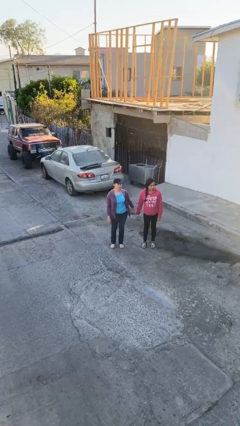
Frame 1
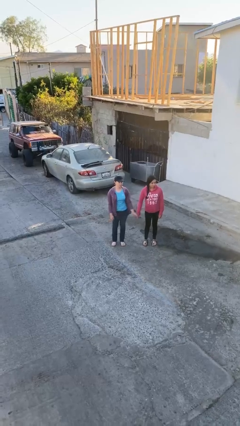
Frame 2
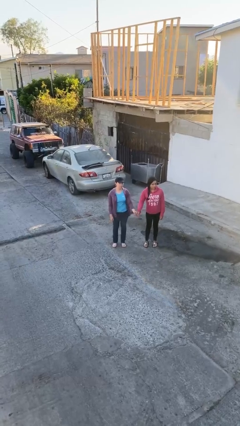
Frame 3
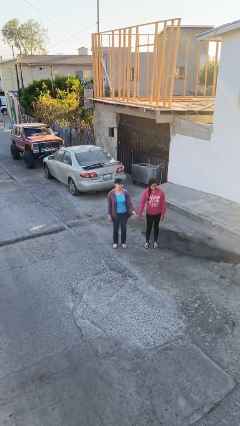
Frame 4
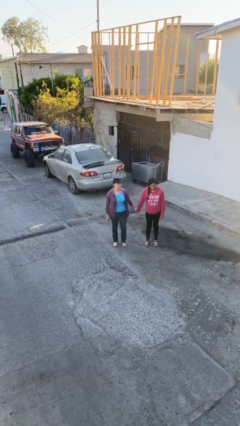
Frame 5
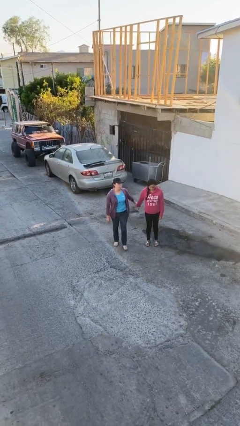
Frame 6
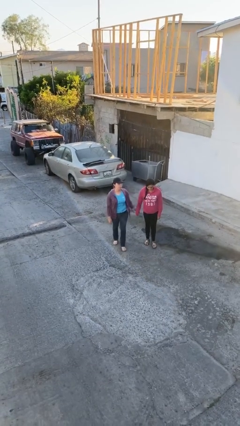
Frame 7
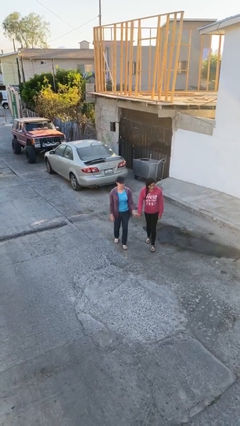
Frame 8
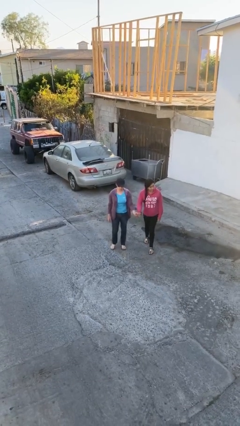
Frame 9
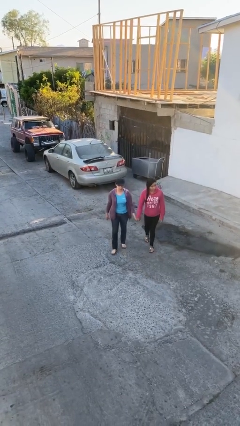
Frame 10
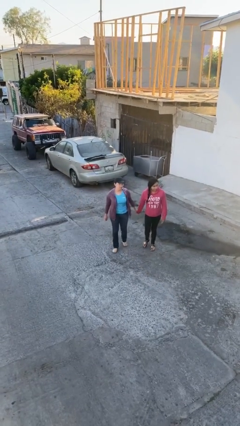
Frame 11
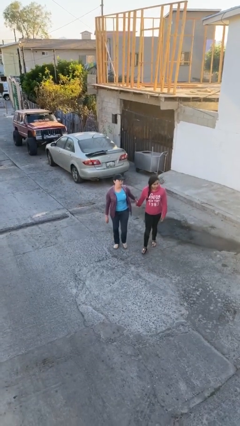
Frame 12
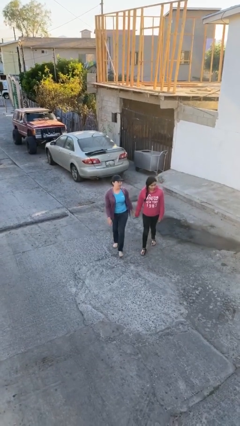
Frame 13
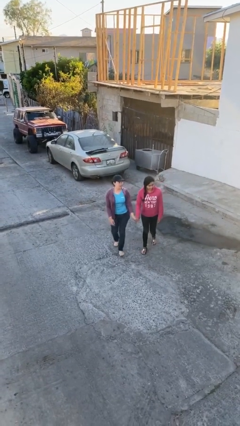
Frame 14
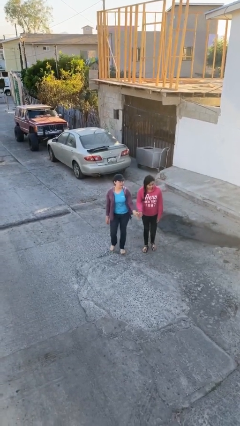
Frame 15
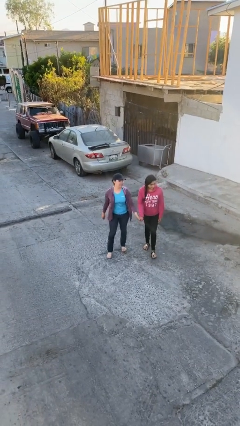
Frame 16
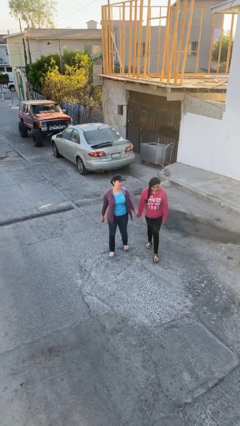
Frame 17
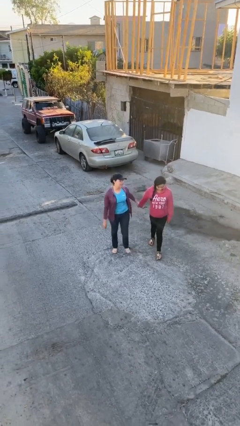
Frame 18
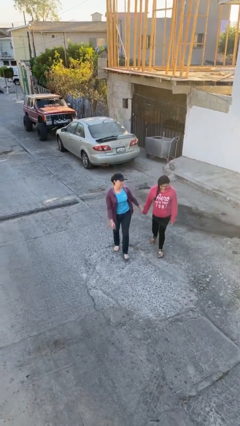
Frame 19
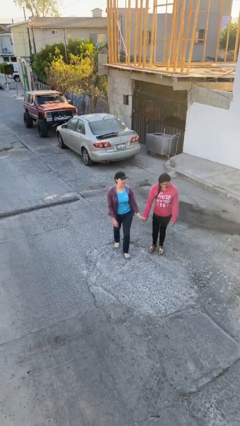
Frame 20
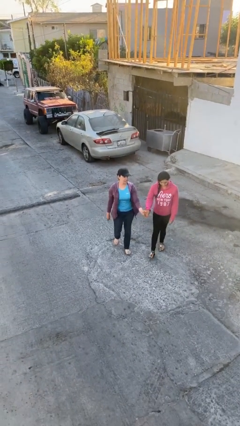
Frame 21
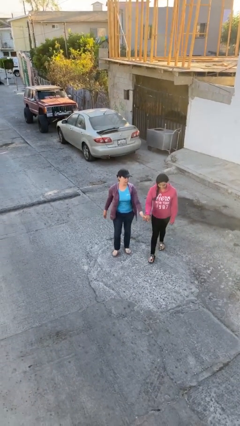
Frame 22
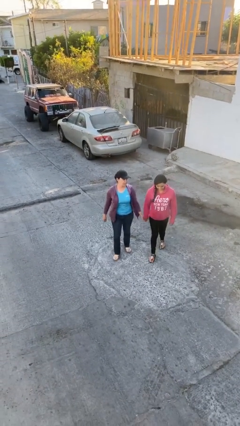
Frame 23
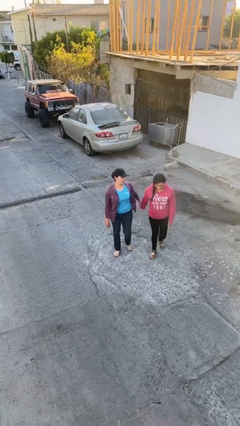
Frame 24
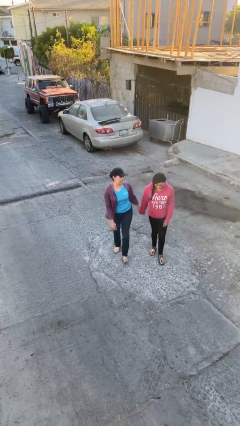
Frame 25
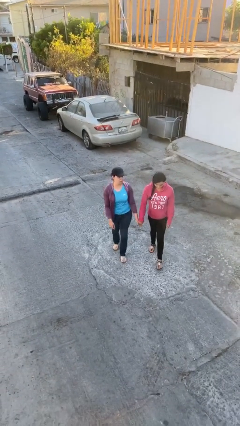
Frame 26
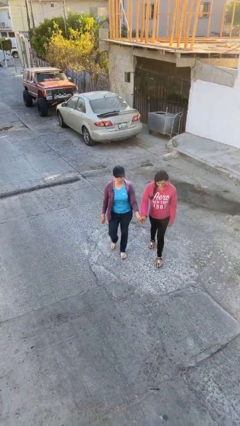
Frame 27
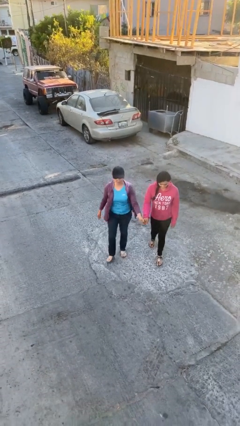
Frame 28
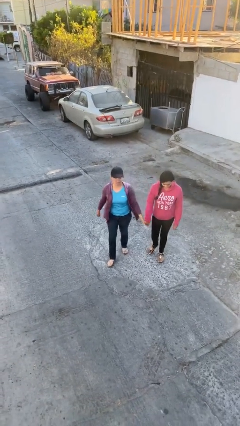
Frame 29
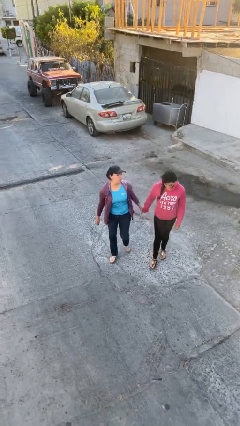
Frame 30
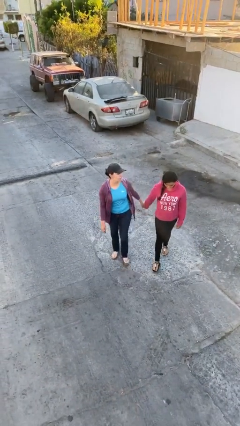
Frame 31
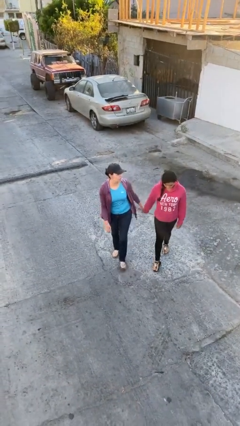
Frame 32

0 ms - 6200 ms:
person holds hand

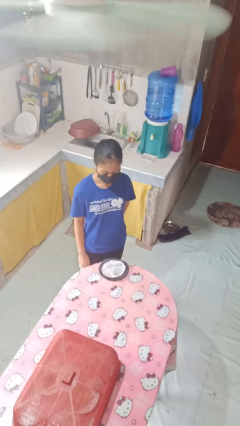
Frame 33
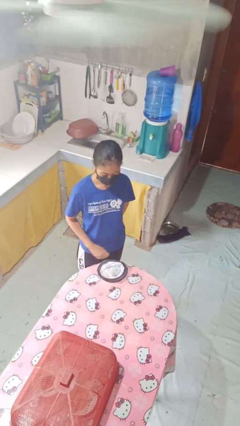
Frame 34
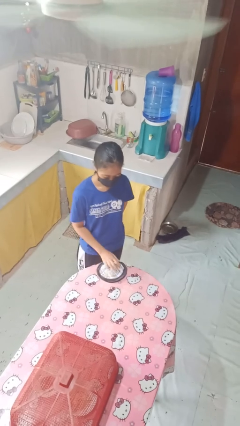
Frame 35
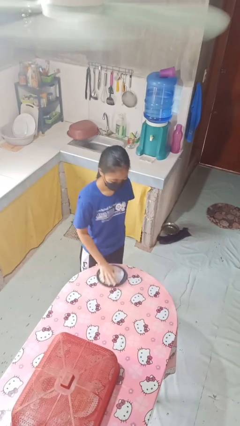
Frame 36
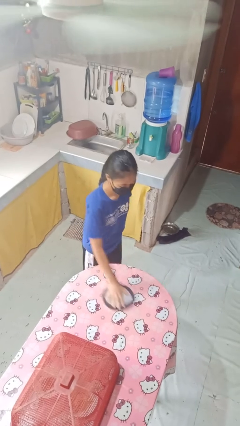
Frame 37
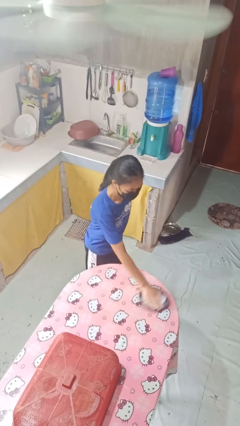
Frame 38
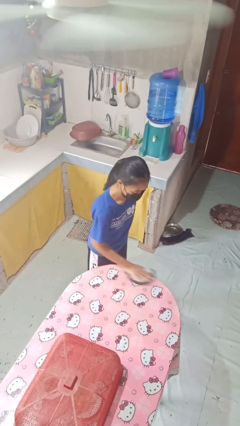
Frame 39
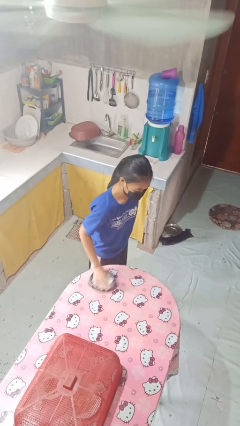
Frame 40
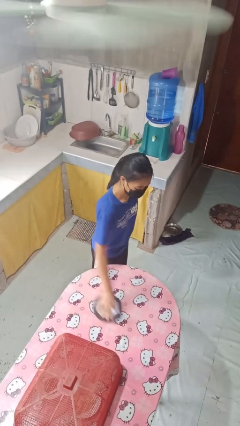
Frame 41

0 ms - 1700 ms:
person cleans table with rag

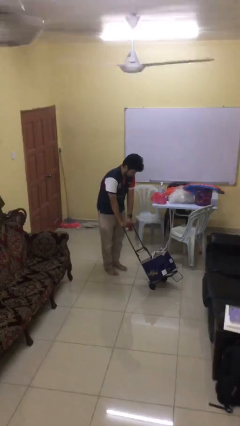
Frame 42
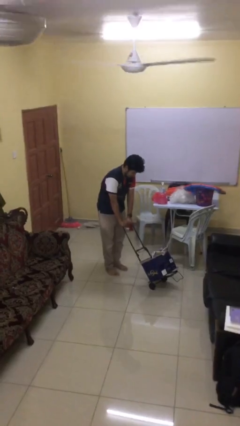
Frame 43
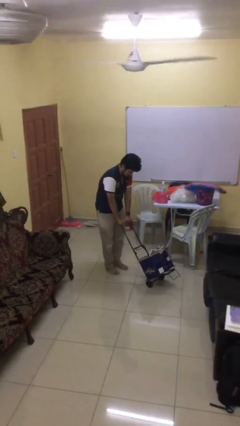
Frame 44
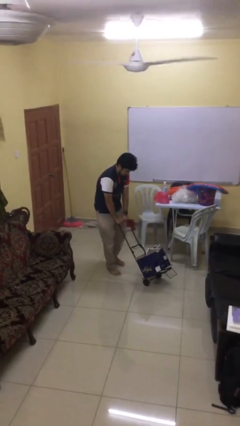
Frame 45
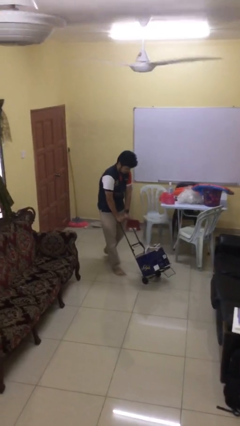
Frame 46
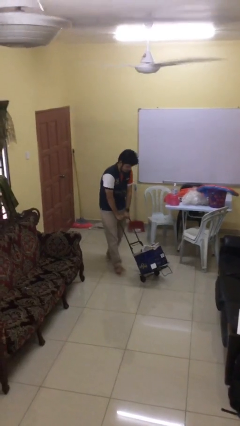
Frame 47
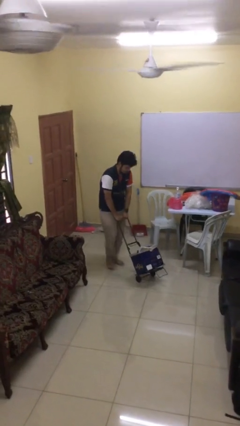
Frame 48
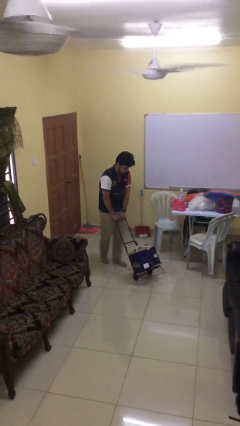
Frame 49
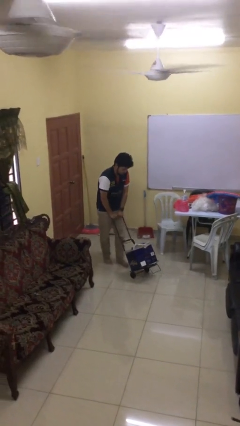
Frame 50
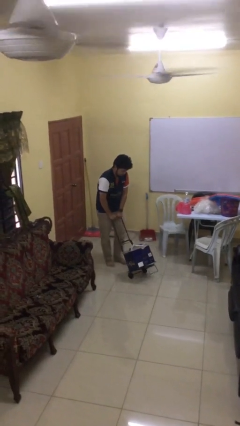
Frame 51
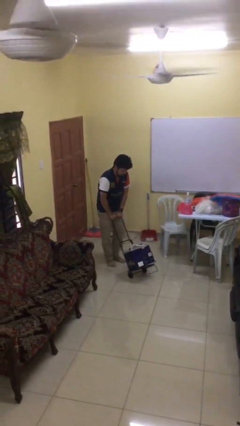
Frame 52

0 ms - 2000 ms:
person pulls wheeled cart

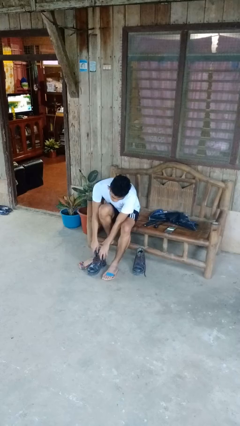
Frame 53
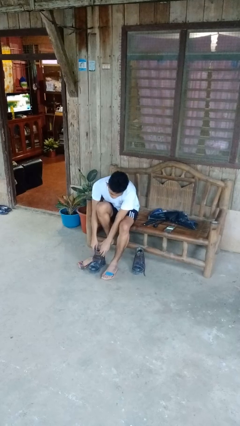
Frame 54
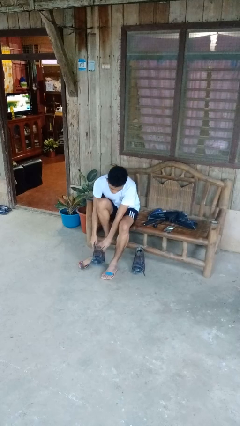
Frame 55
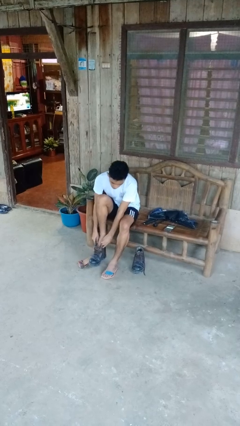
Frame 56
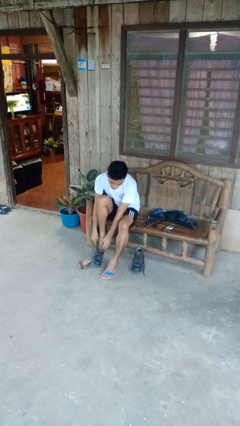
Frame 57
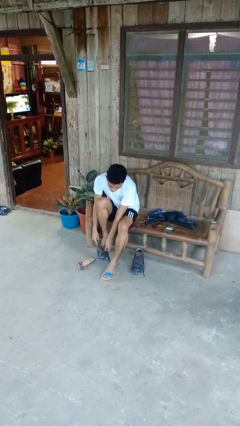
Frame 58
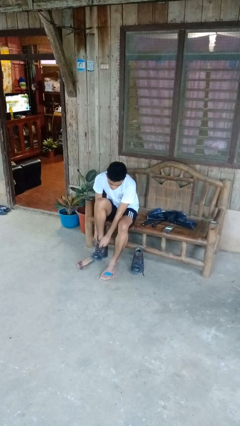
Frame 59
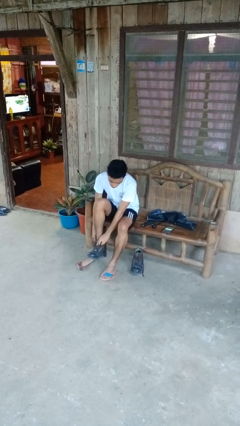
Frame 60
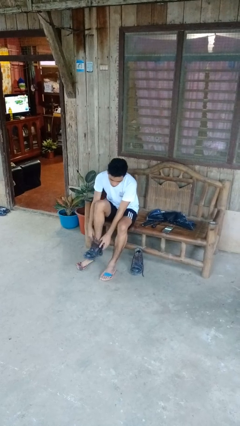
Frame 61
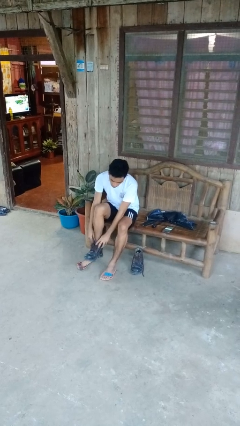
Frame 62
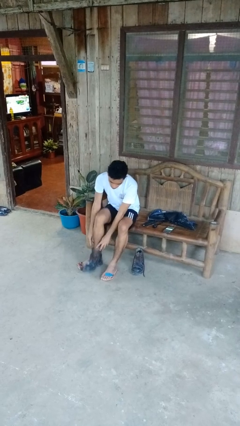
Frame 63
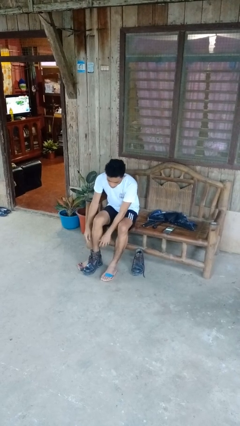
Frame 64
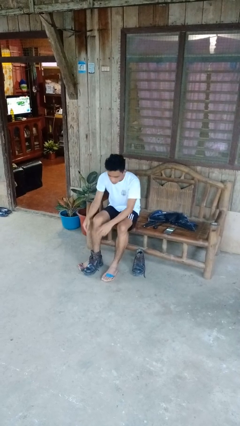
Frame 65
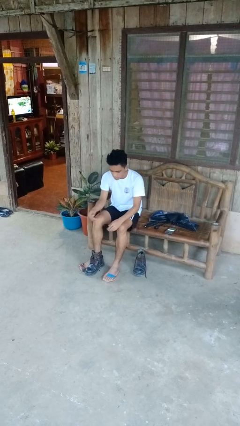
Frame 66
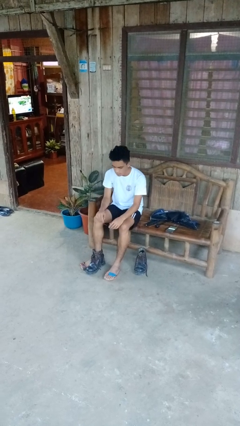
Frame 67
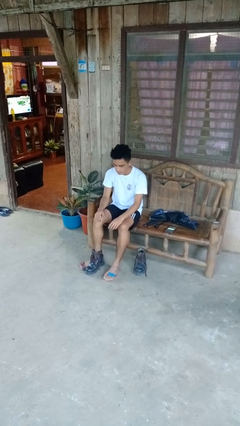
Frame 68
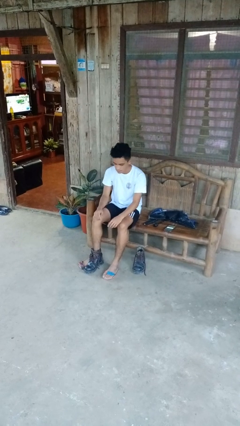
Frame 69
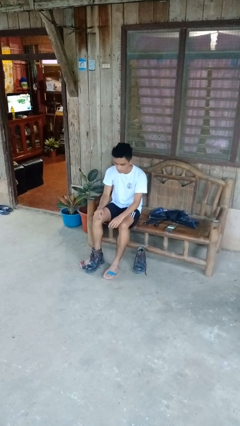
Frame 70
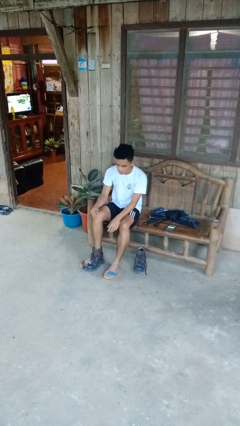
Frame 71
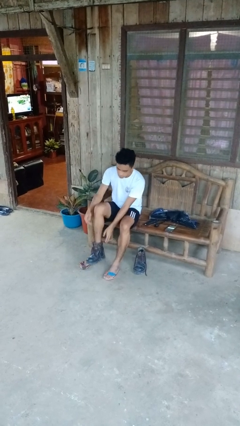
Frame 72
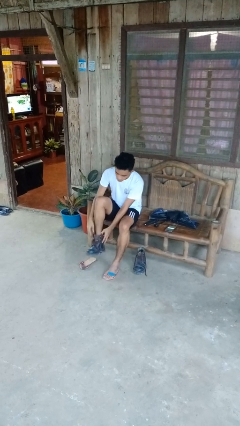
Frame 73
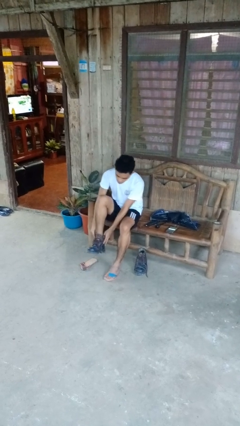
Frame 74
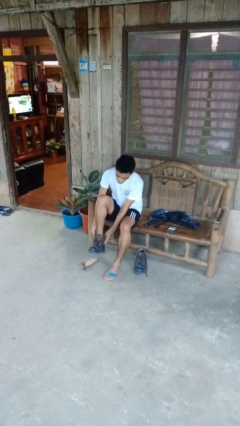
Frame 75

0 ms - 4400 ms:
person puts on boots

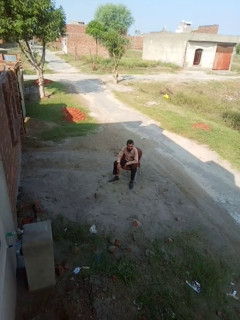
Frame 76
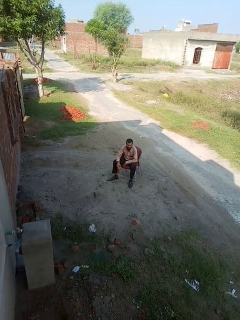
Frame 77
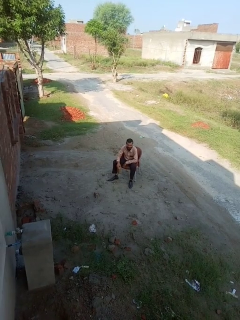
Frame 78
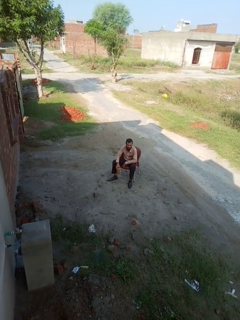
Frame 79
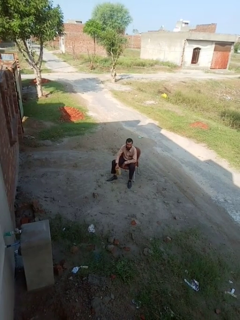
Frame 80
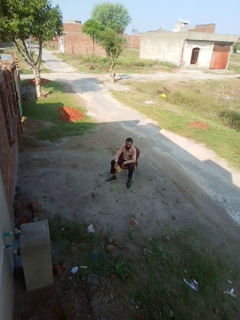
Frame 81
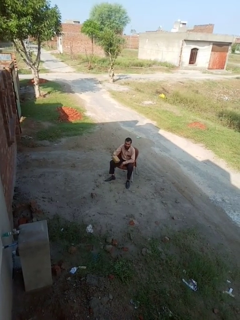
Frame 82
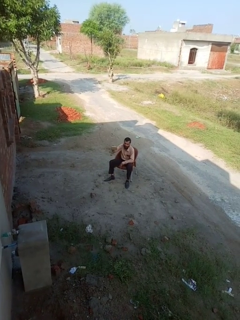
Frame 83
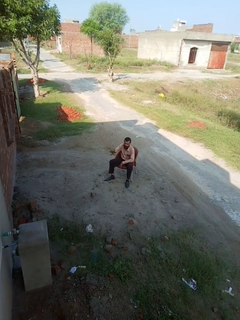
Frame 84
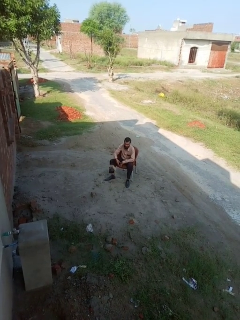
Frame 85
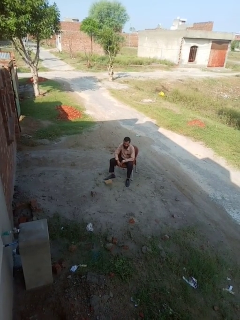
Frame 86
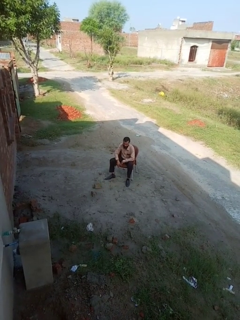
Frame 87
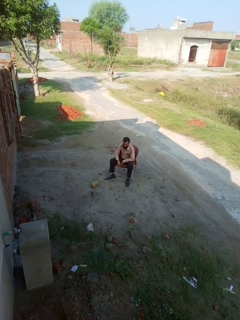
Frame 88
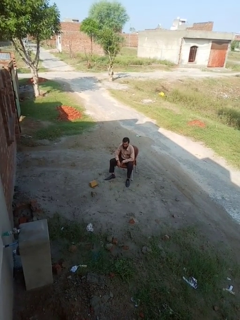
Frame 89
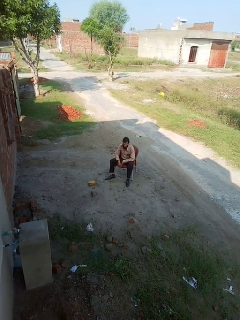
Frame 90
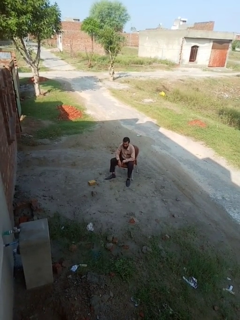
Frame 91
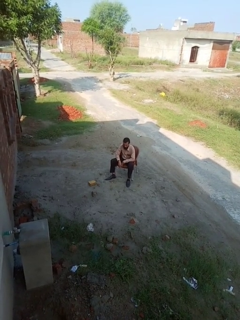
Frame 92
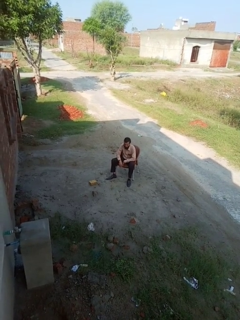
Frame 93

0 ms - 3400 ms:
person throws object into air

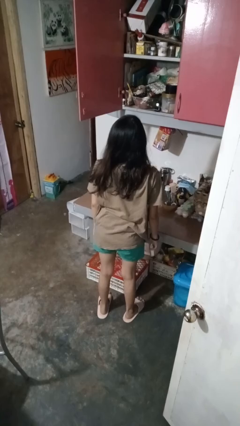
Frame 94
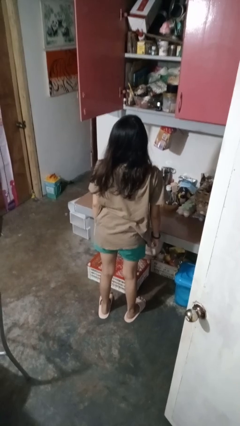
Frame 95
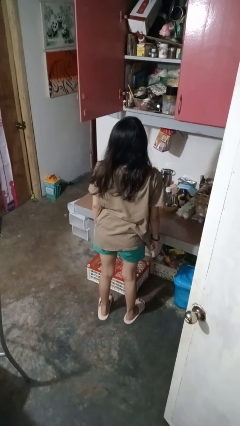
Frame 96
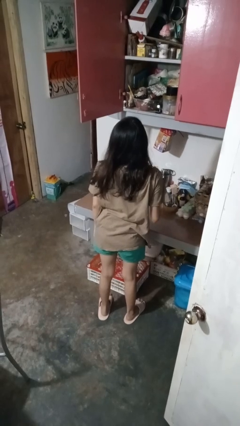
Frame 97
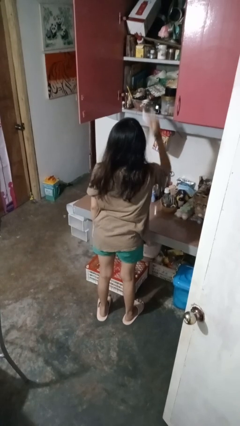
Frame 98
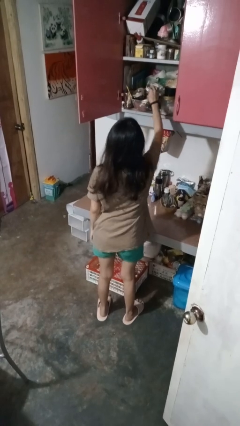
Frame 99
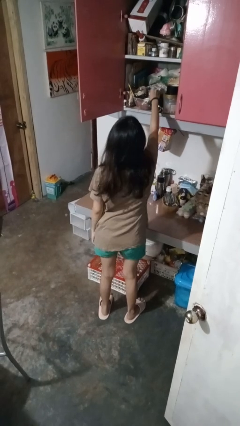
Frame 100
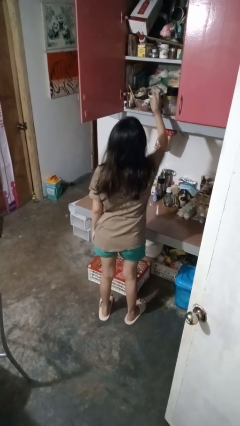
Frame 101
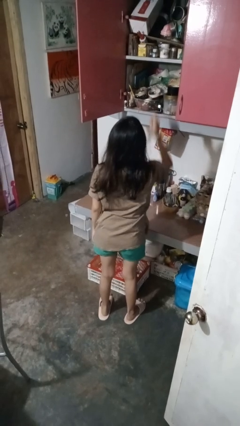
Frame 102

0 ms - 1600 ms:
person puts object in cabinet
